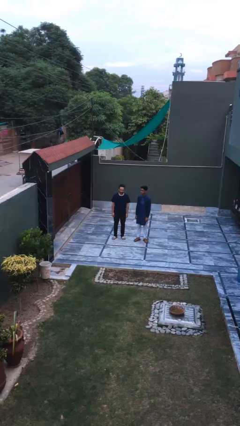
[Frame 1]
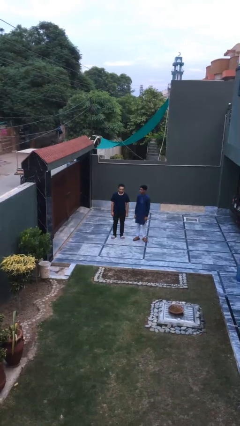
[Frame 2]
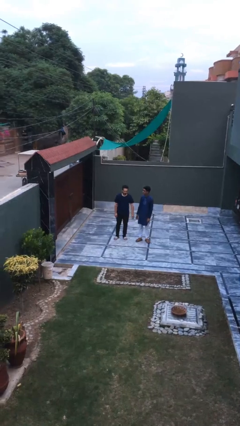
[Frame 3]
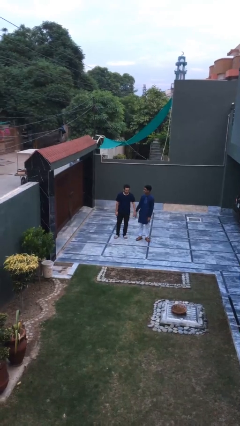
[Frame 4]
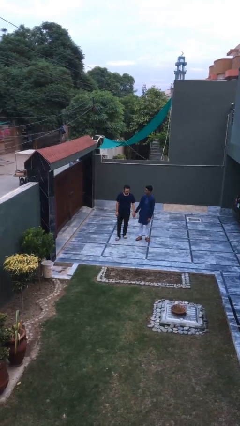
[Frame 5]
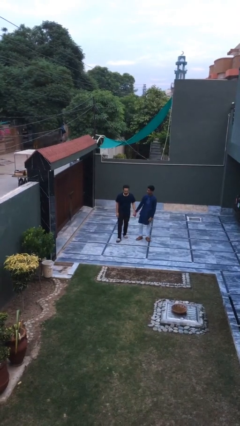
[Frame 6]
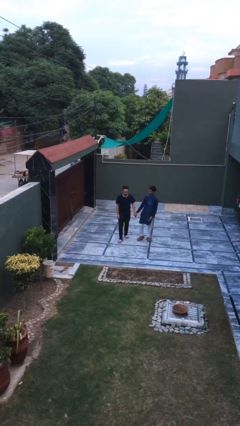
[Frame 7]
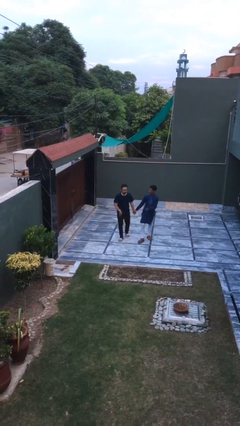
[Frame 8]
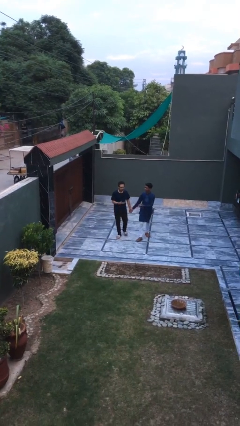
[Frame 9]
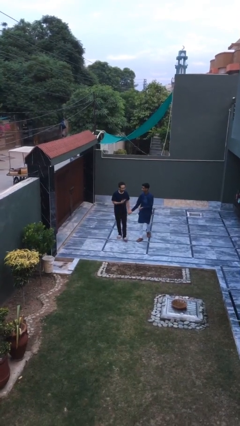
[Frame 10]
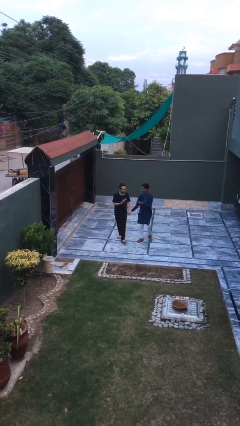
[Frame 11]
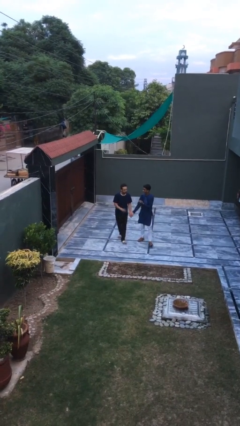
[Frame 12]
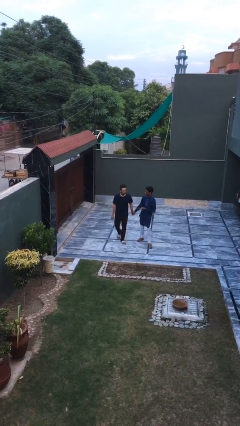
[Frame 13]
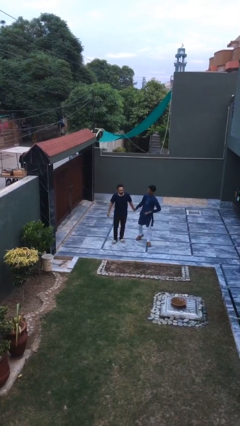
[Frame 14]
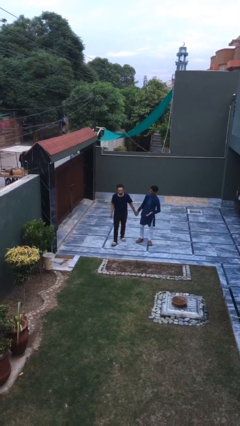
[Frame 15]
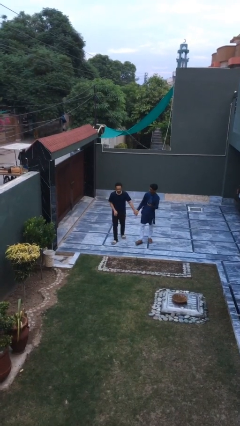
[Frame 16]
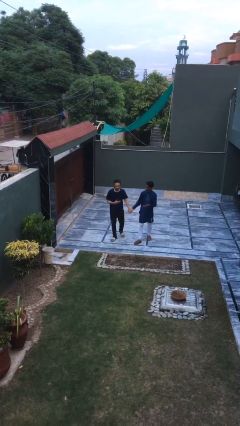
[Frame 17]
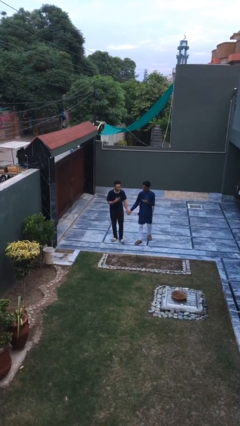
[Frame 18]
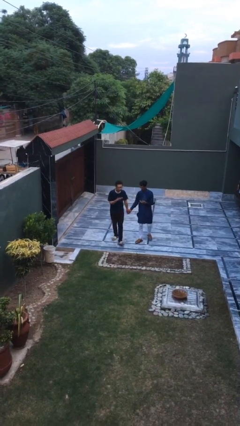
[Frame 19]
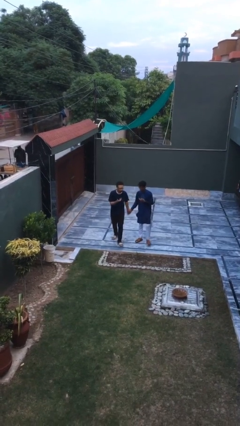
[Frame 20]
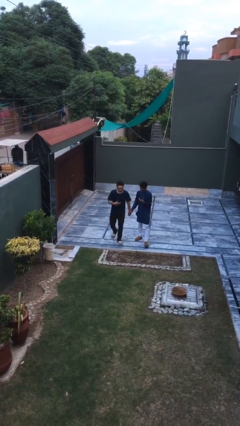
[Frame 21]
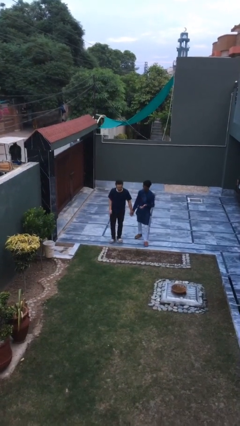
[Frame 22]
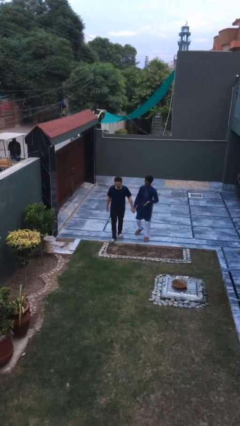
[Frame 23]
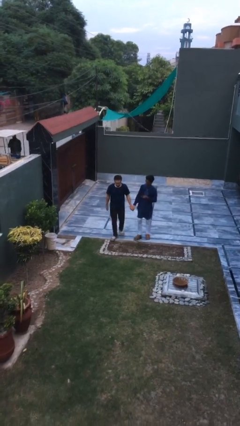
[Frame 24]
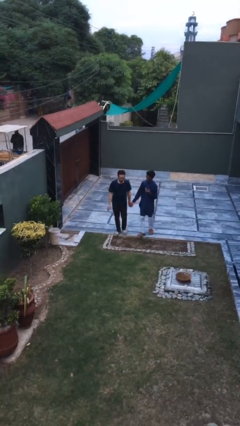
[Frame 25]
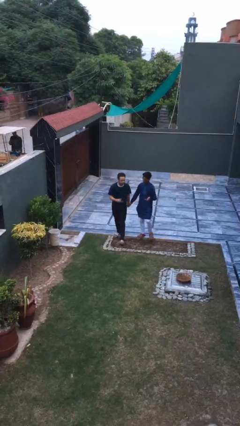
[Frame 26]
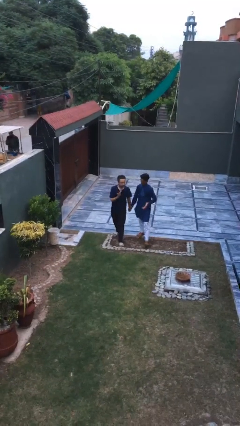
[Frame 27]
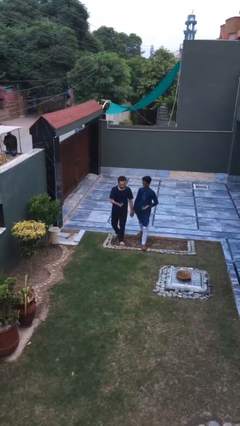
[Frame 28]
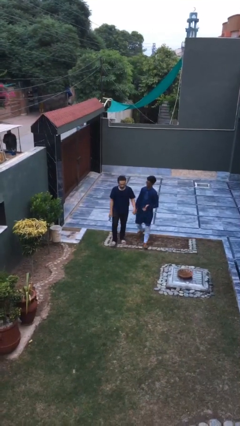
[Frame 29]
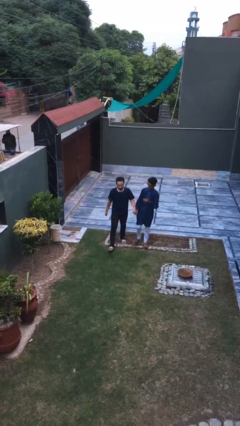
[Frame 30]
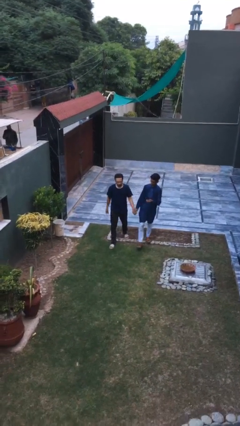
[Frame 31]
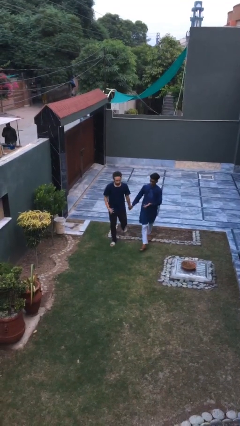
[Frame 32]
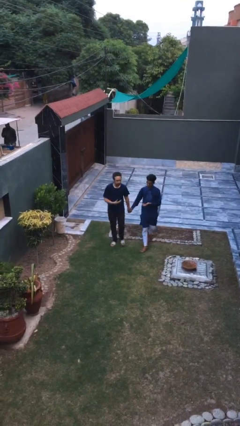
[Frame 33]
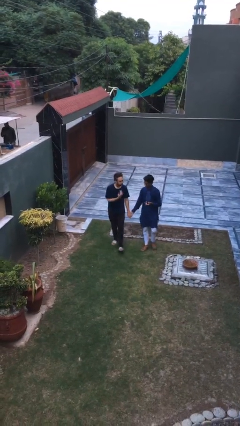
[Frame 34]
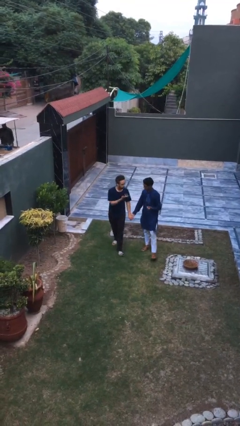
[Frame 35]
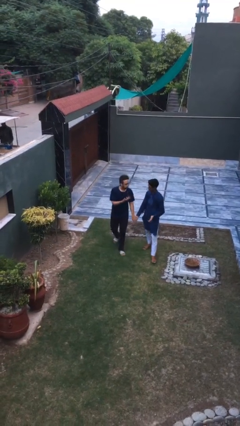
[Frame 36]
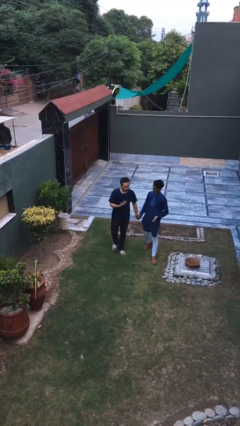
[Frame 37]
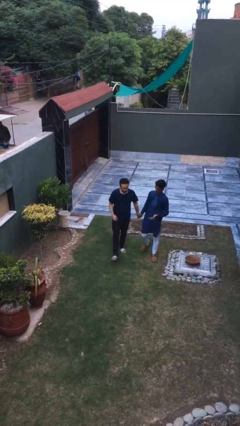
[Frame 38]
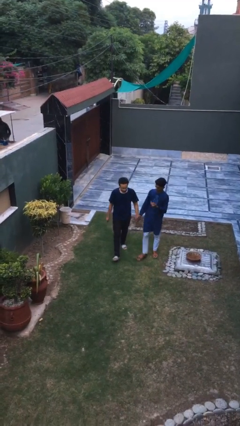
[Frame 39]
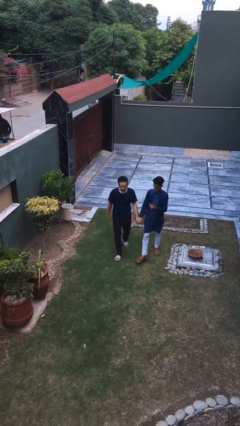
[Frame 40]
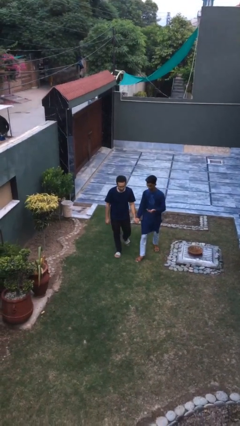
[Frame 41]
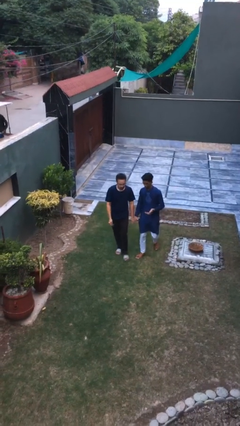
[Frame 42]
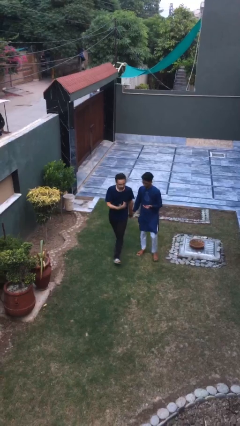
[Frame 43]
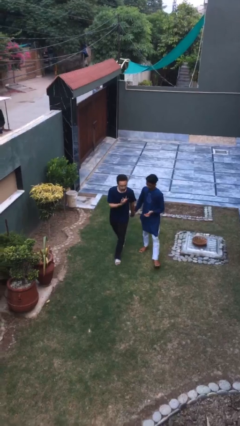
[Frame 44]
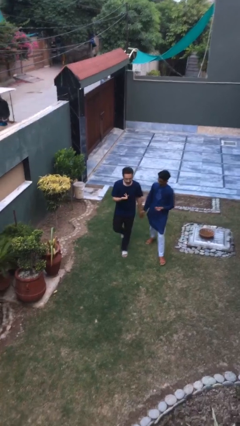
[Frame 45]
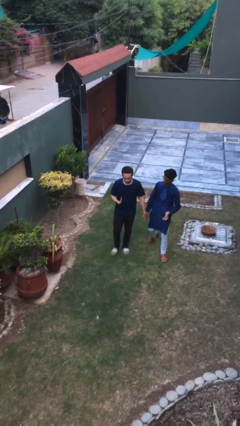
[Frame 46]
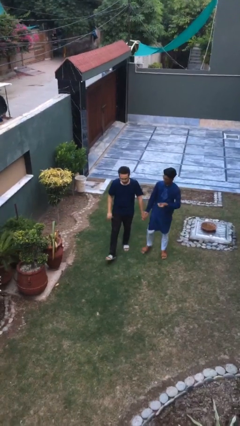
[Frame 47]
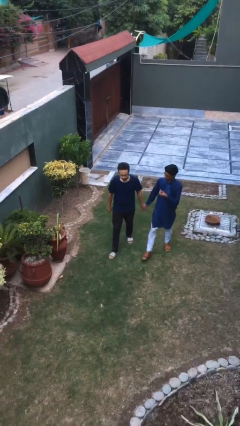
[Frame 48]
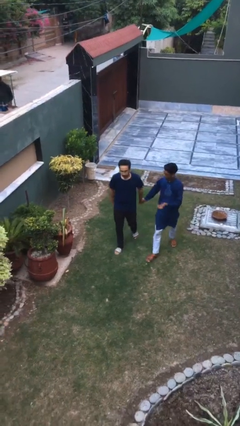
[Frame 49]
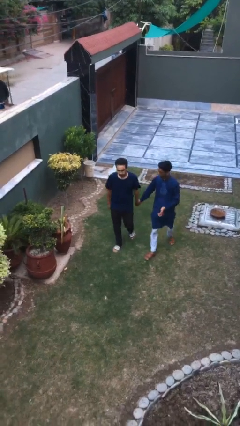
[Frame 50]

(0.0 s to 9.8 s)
person holds hand

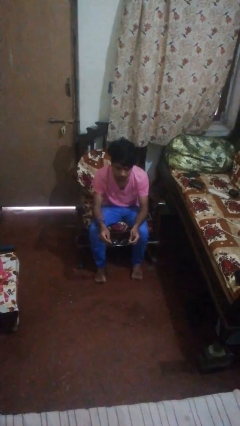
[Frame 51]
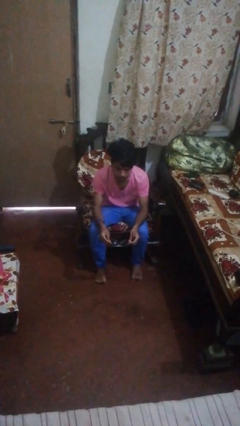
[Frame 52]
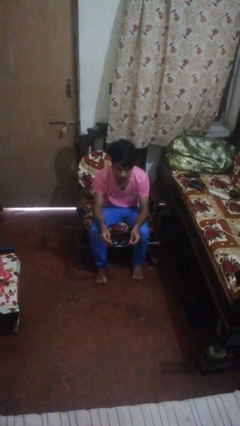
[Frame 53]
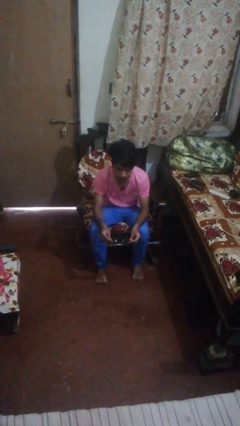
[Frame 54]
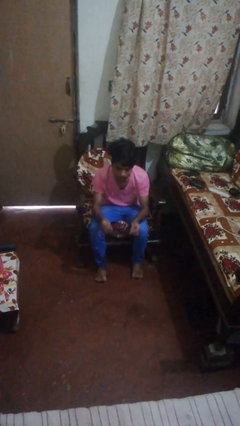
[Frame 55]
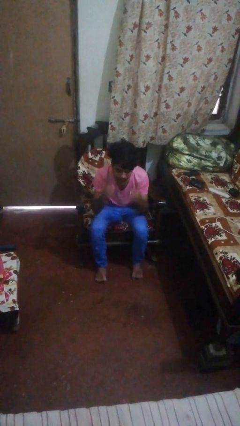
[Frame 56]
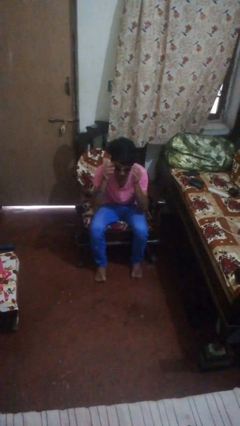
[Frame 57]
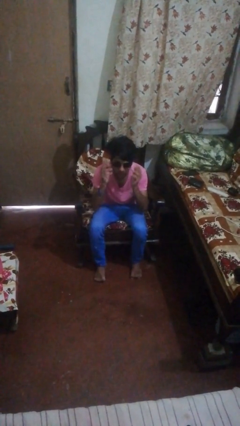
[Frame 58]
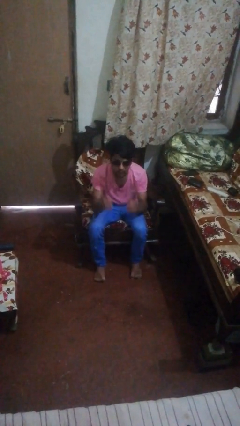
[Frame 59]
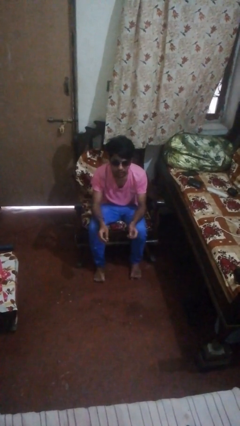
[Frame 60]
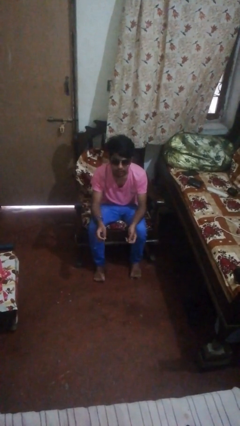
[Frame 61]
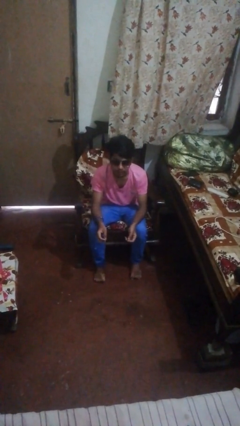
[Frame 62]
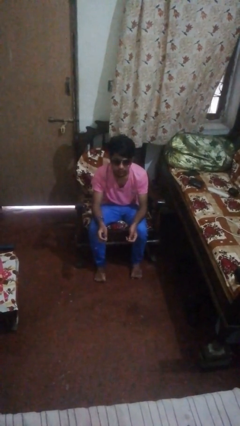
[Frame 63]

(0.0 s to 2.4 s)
person puts on sunglasses

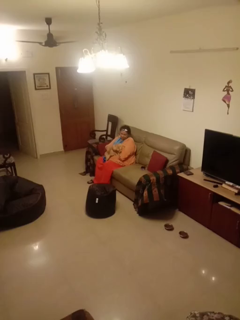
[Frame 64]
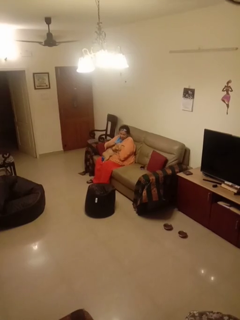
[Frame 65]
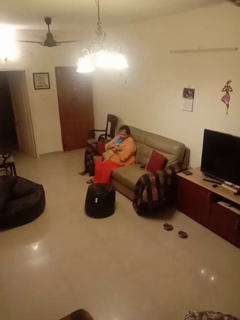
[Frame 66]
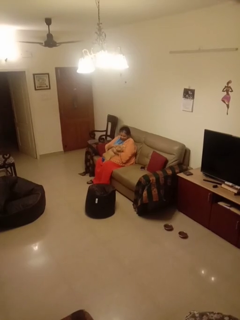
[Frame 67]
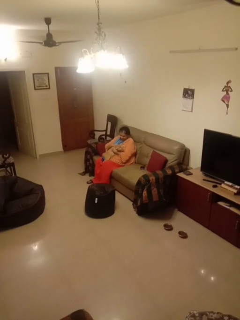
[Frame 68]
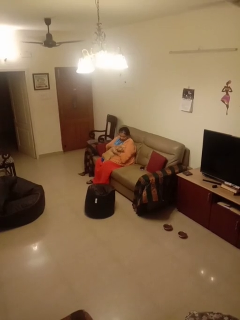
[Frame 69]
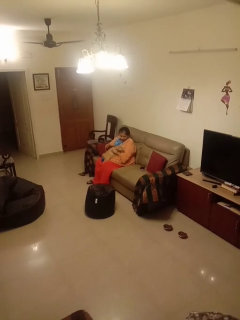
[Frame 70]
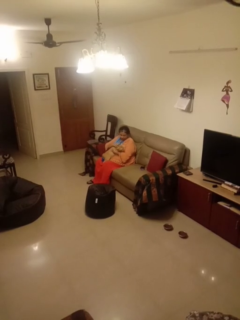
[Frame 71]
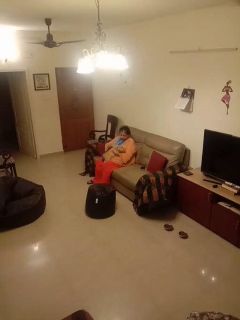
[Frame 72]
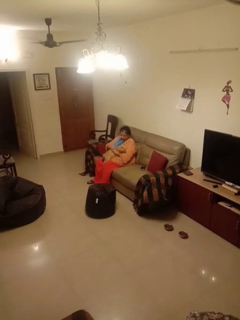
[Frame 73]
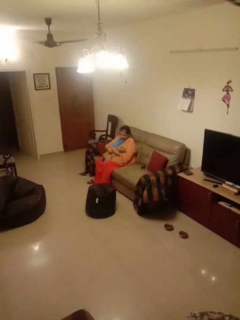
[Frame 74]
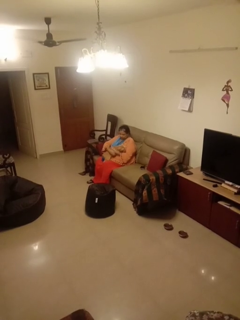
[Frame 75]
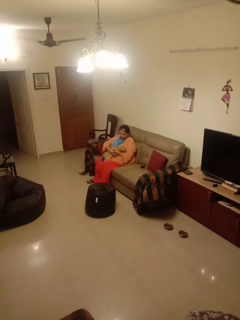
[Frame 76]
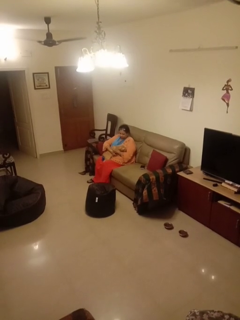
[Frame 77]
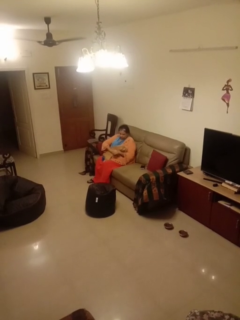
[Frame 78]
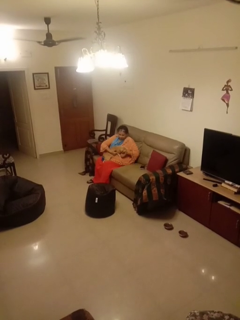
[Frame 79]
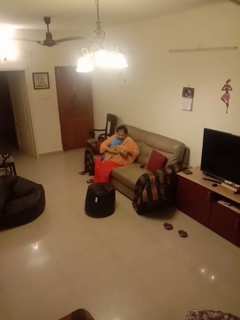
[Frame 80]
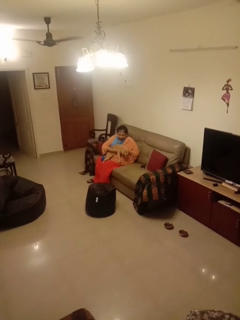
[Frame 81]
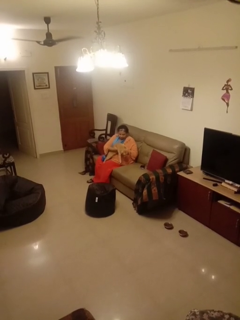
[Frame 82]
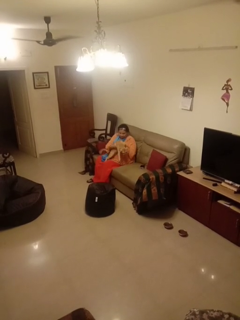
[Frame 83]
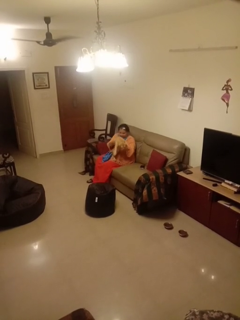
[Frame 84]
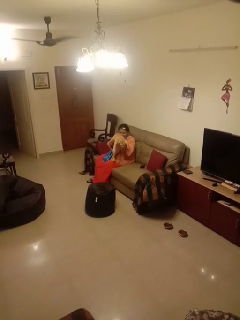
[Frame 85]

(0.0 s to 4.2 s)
person pets cat

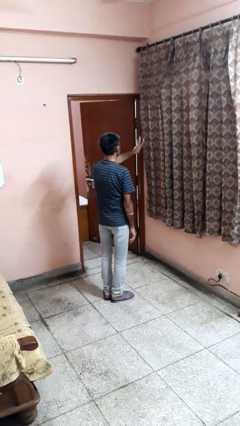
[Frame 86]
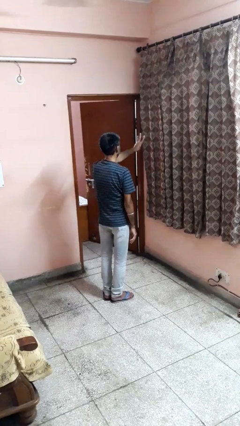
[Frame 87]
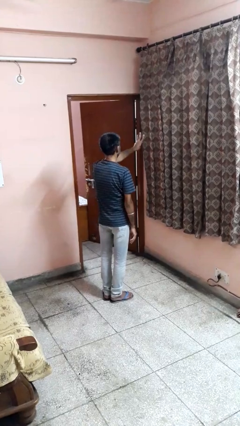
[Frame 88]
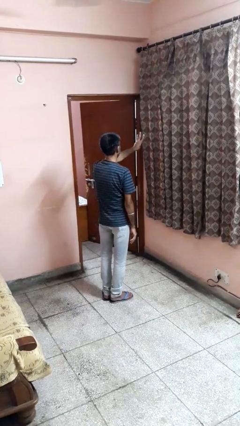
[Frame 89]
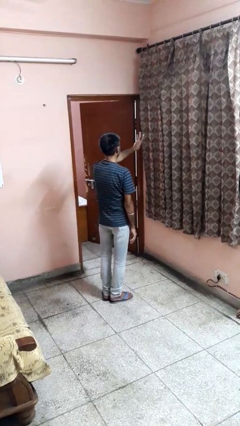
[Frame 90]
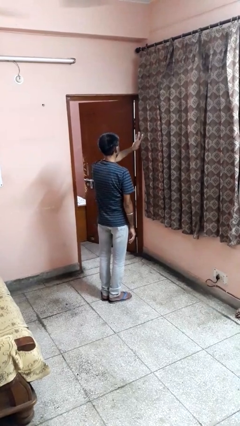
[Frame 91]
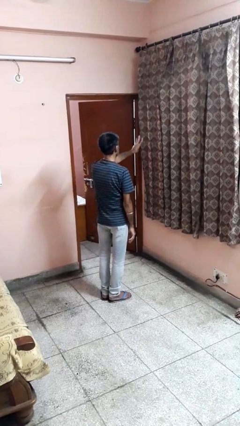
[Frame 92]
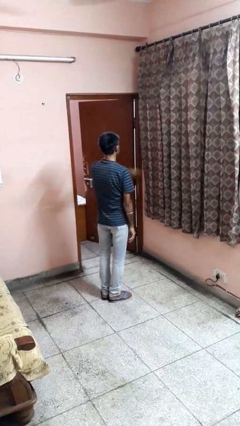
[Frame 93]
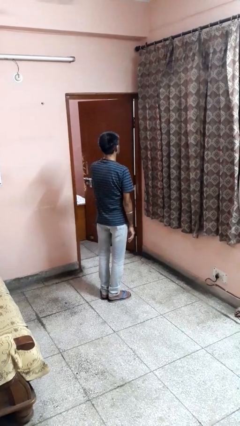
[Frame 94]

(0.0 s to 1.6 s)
person gestures number three

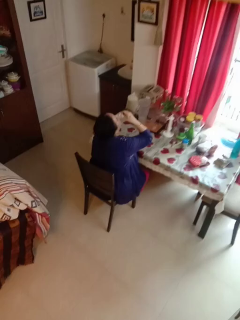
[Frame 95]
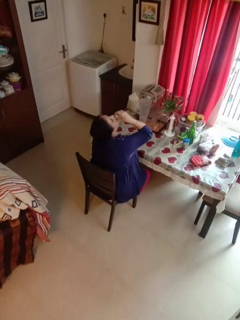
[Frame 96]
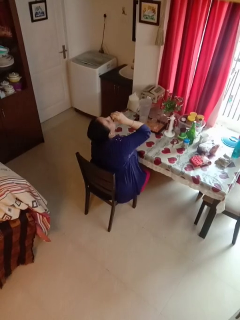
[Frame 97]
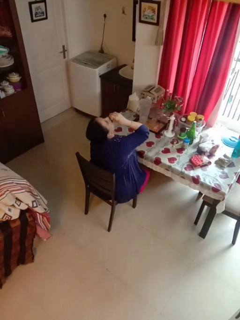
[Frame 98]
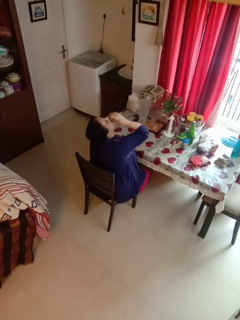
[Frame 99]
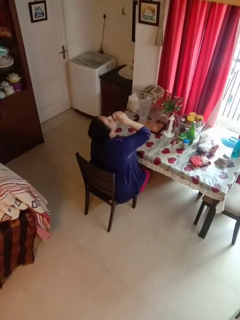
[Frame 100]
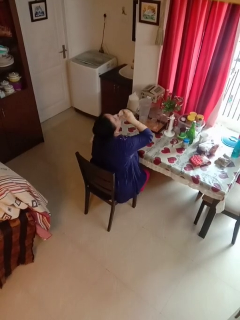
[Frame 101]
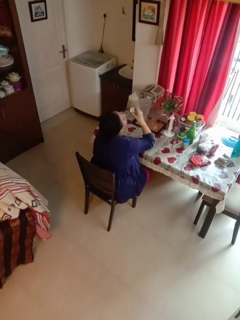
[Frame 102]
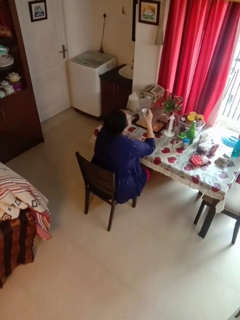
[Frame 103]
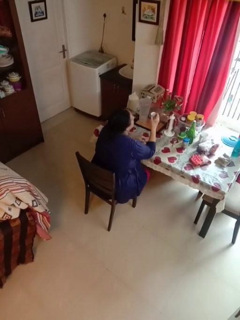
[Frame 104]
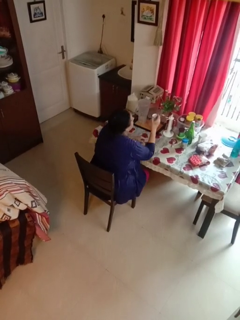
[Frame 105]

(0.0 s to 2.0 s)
person drinks from shotglass
